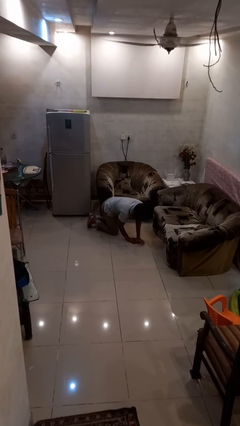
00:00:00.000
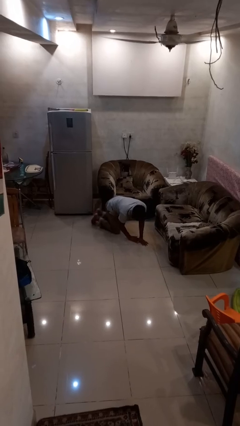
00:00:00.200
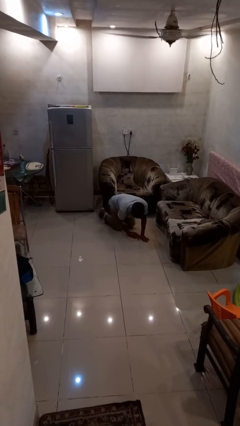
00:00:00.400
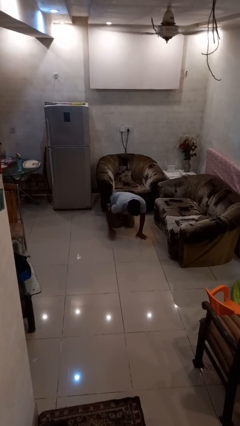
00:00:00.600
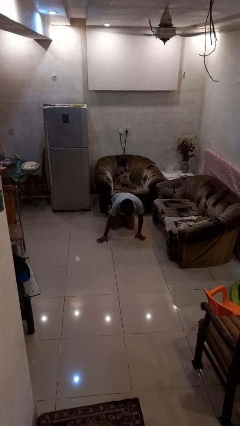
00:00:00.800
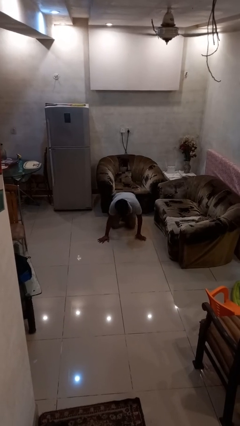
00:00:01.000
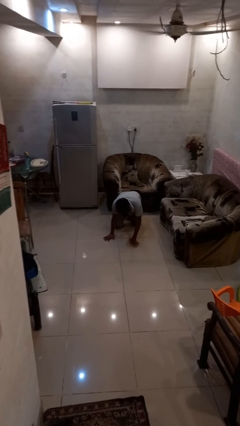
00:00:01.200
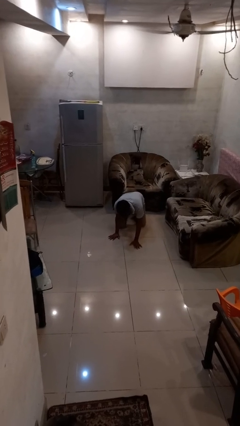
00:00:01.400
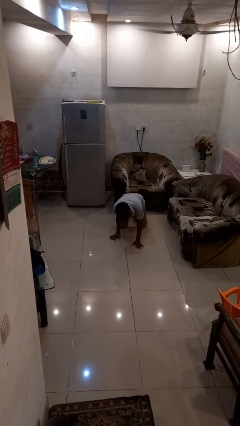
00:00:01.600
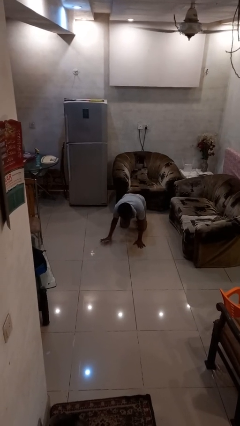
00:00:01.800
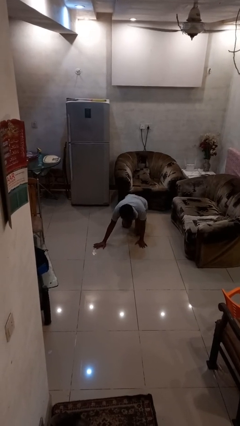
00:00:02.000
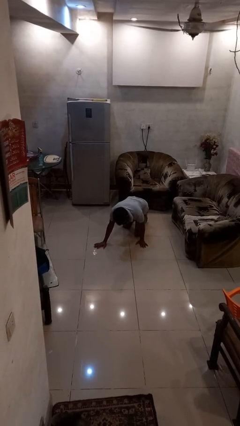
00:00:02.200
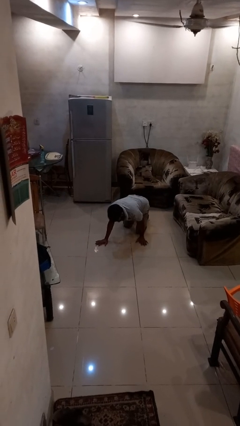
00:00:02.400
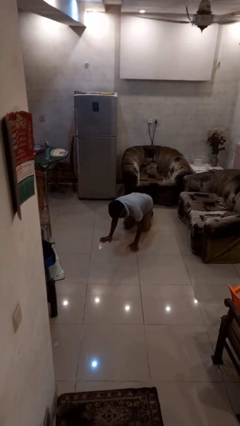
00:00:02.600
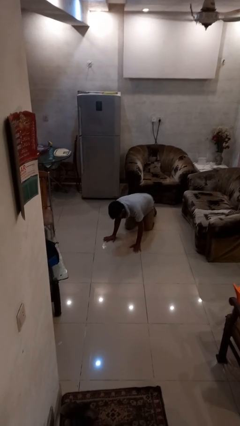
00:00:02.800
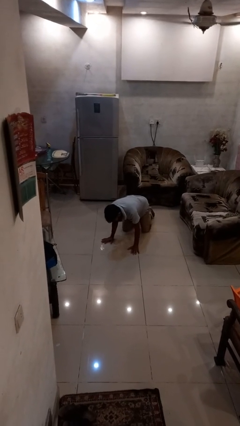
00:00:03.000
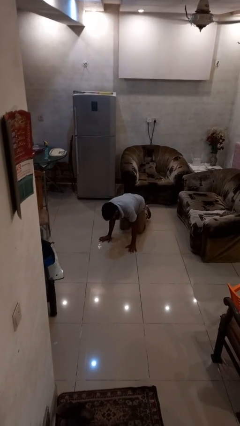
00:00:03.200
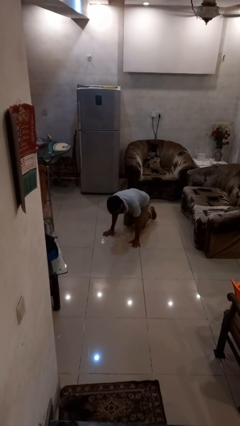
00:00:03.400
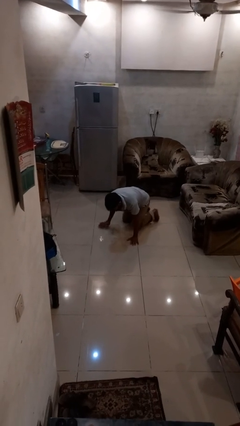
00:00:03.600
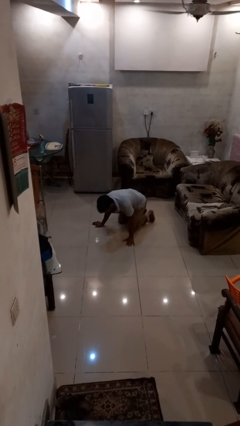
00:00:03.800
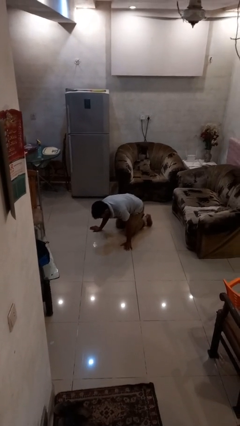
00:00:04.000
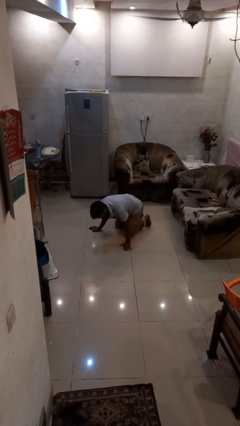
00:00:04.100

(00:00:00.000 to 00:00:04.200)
person crawls

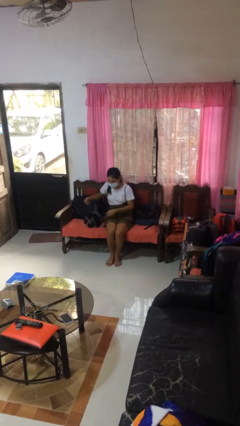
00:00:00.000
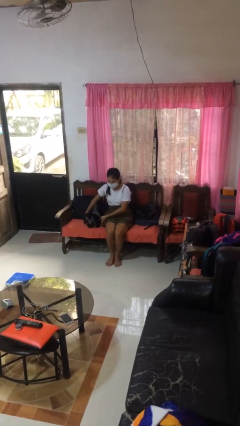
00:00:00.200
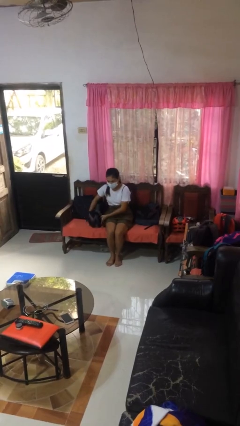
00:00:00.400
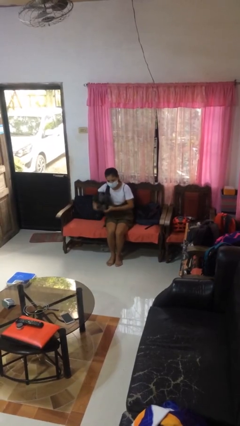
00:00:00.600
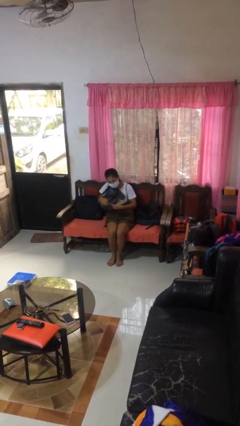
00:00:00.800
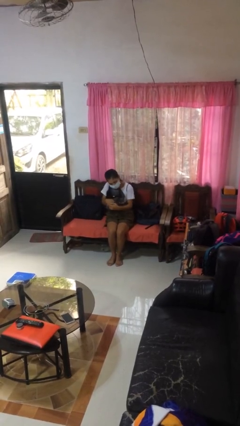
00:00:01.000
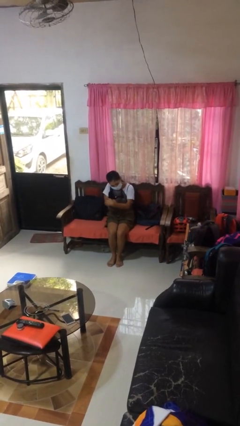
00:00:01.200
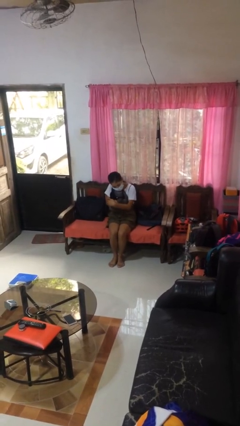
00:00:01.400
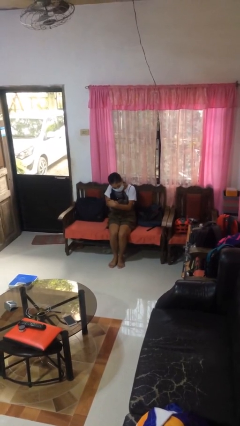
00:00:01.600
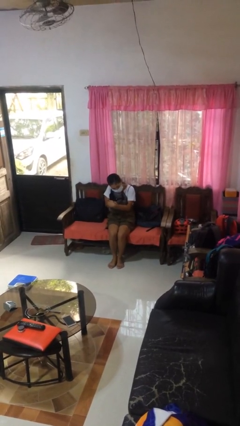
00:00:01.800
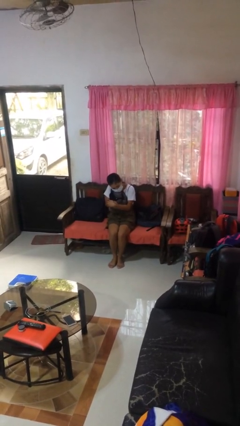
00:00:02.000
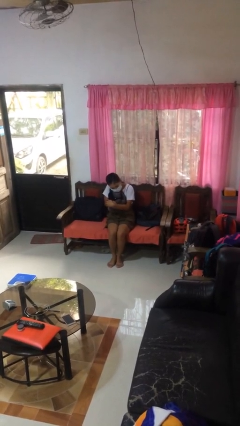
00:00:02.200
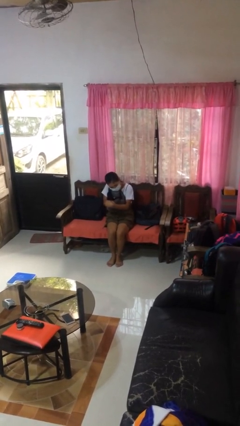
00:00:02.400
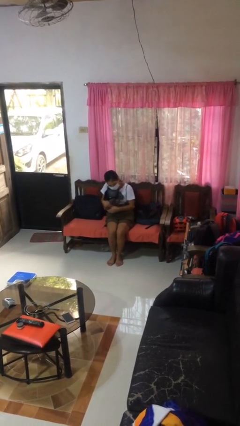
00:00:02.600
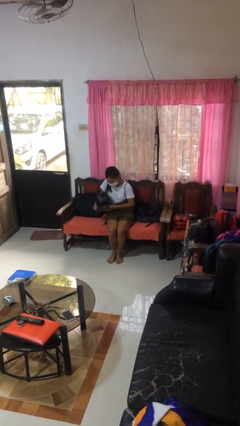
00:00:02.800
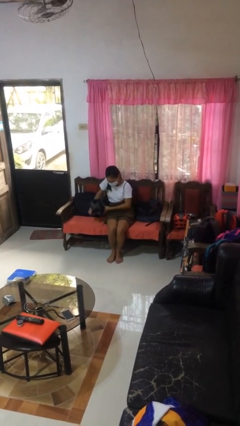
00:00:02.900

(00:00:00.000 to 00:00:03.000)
person hugs stuffed animal

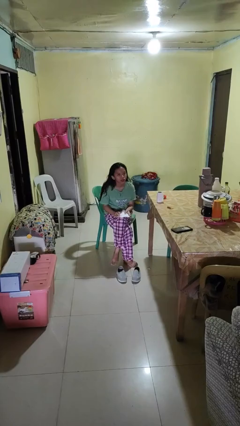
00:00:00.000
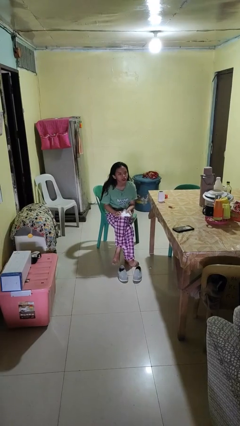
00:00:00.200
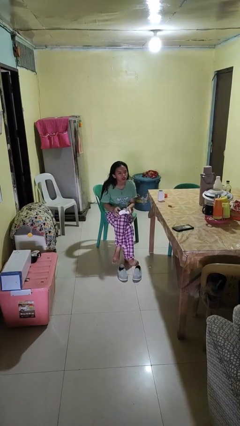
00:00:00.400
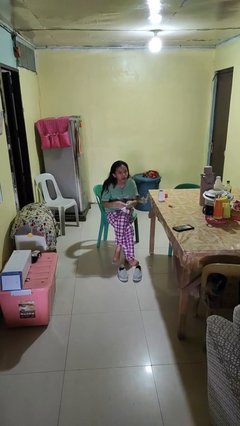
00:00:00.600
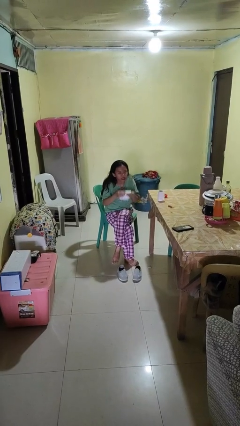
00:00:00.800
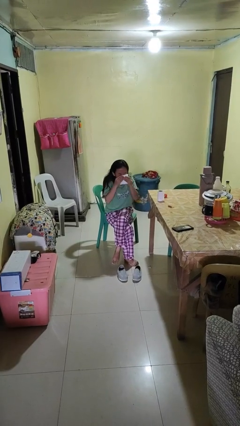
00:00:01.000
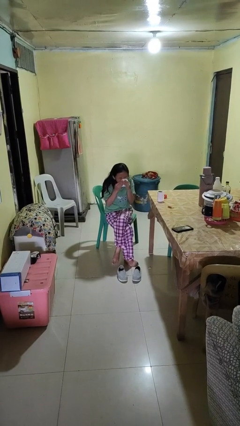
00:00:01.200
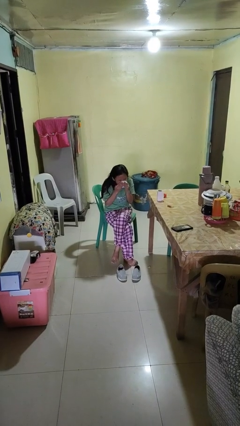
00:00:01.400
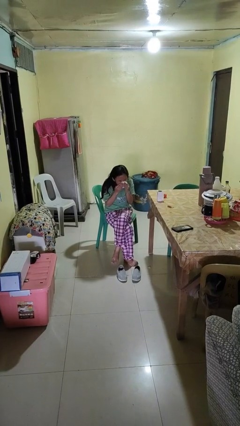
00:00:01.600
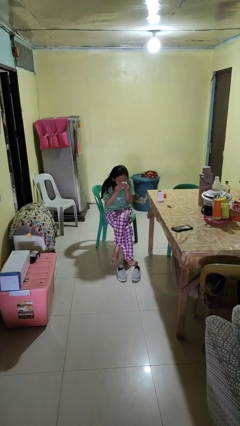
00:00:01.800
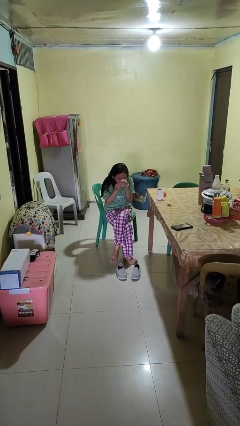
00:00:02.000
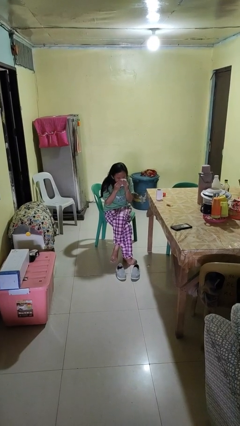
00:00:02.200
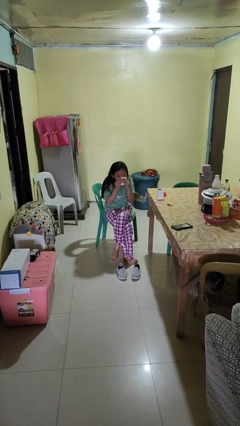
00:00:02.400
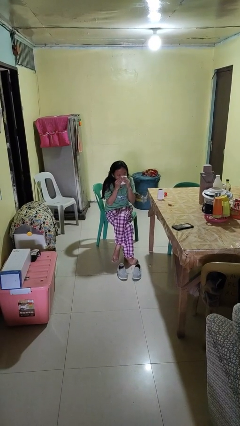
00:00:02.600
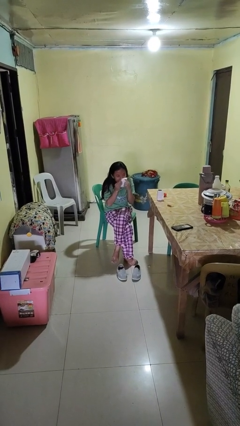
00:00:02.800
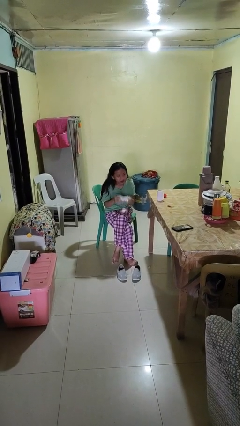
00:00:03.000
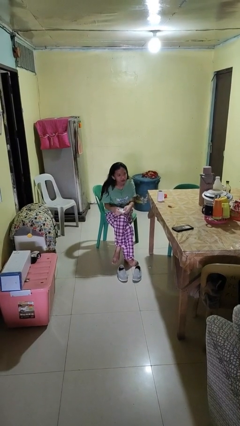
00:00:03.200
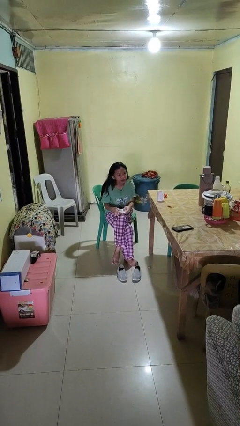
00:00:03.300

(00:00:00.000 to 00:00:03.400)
person blows nose

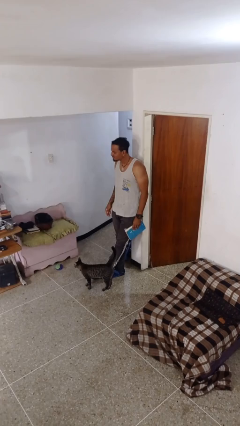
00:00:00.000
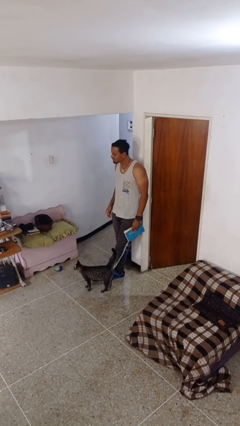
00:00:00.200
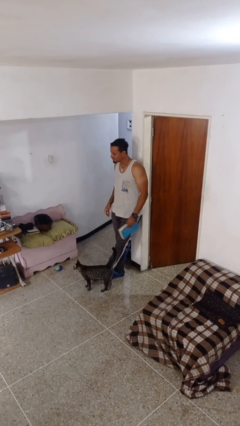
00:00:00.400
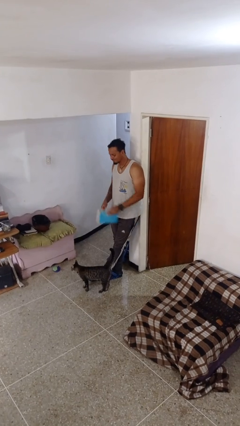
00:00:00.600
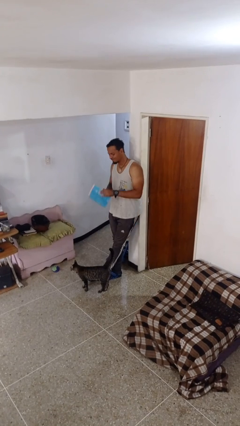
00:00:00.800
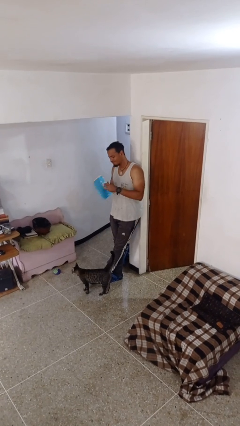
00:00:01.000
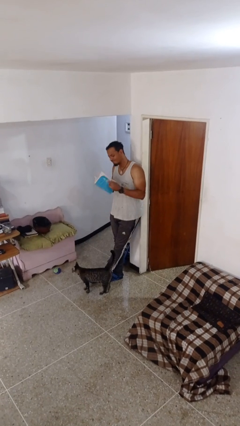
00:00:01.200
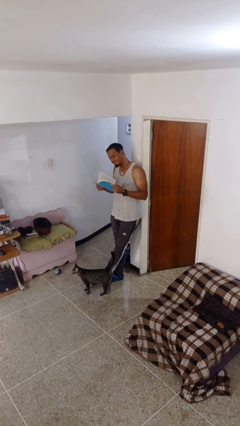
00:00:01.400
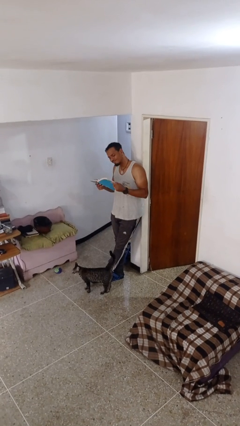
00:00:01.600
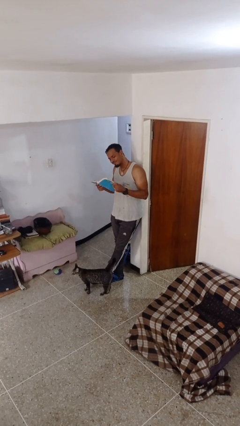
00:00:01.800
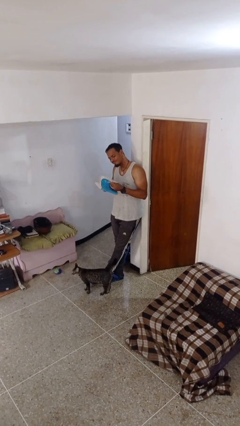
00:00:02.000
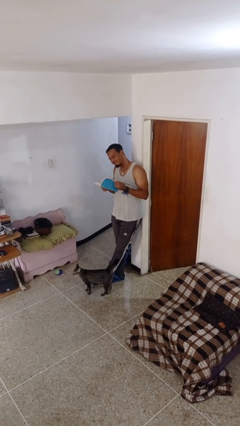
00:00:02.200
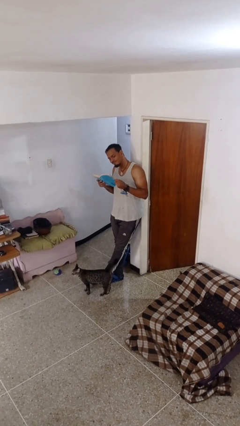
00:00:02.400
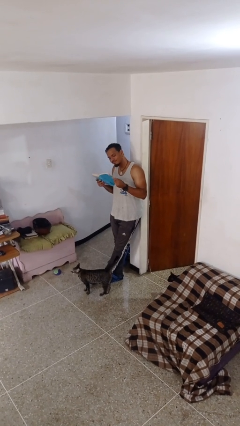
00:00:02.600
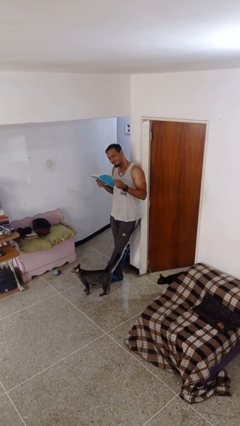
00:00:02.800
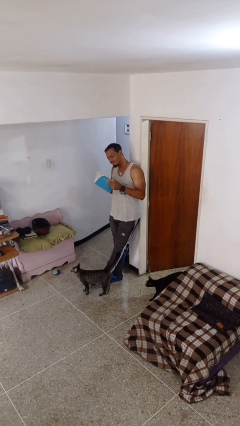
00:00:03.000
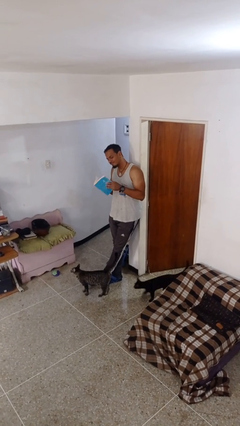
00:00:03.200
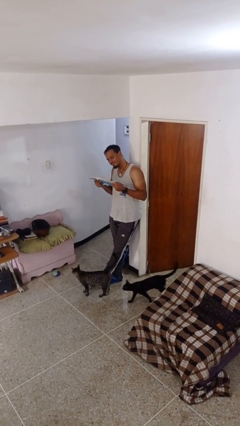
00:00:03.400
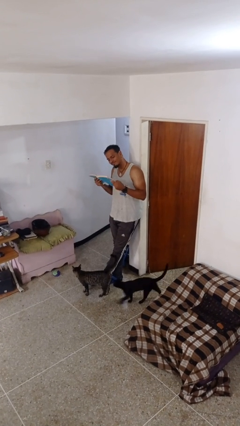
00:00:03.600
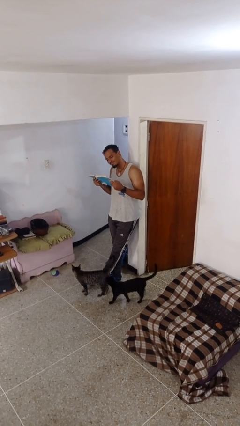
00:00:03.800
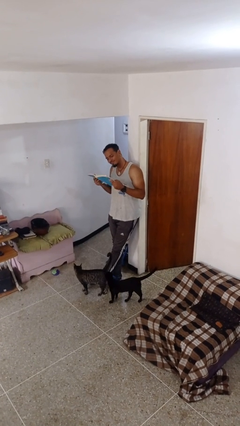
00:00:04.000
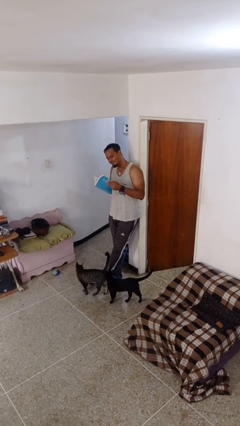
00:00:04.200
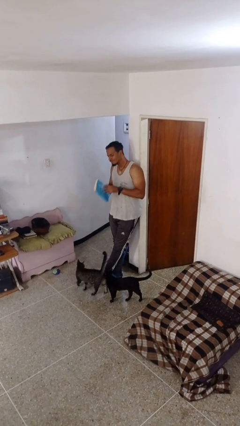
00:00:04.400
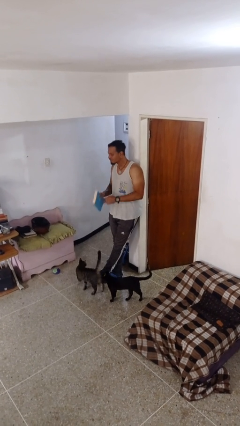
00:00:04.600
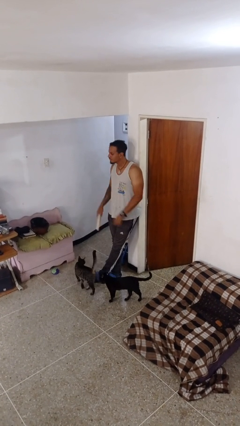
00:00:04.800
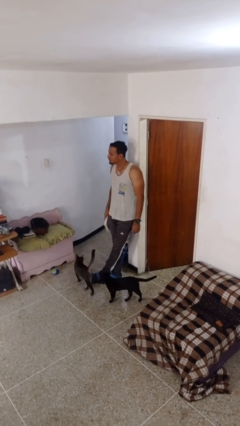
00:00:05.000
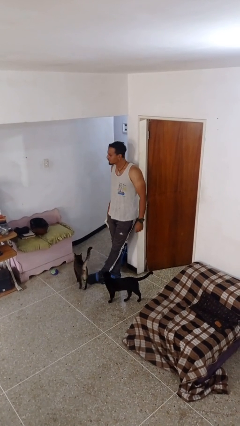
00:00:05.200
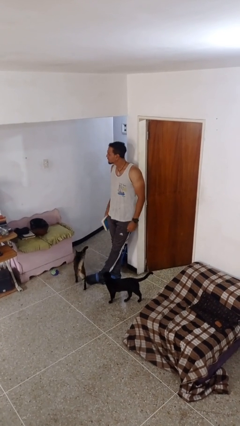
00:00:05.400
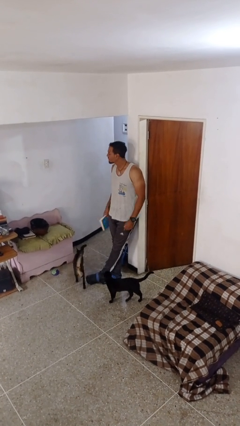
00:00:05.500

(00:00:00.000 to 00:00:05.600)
person reads book

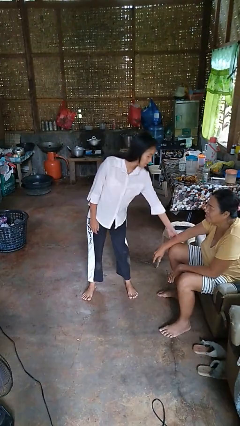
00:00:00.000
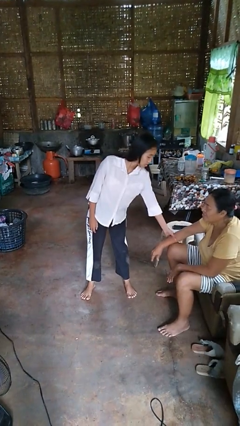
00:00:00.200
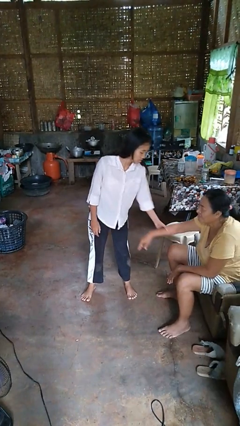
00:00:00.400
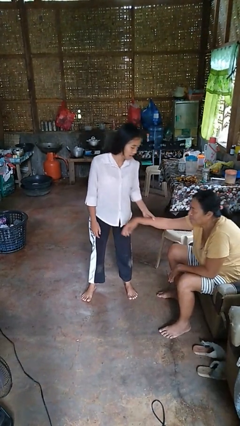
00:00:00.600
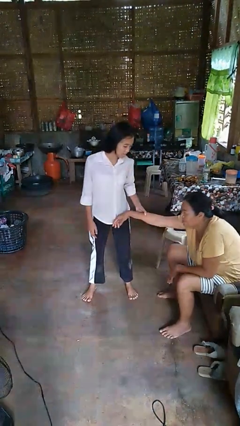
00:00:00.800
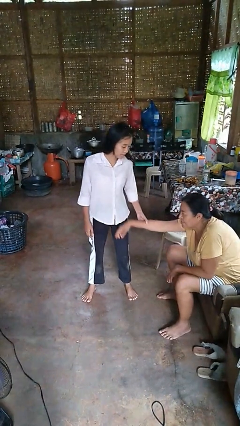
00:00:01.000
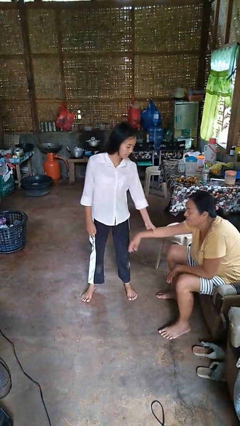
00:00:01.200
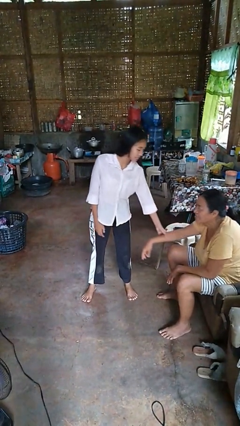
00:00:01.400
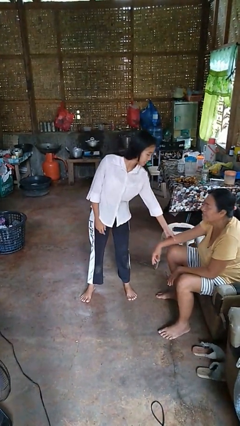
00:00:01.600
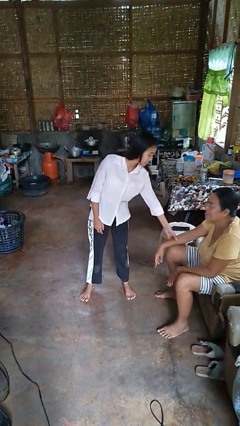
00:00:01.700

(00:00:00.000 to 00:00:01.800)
person grabs person by forearm
